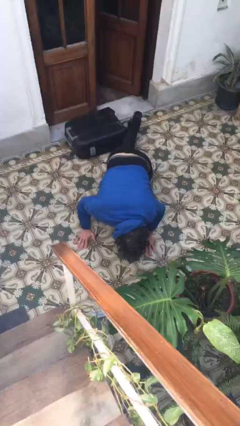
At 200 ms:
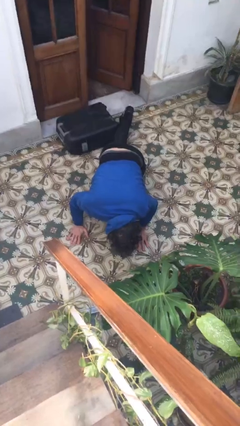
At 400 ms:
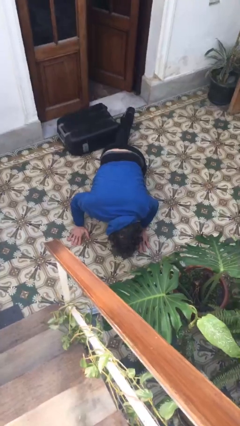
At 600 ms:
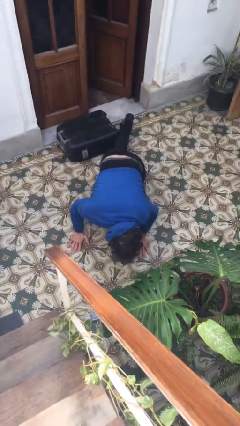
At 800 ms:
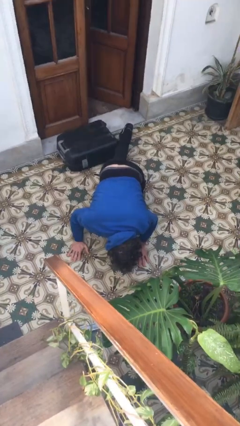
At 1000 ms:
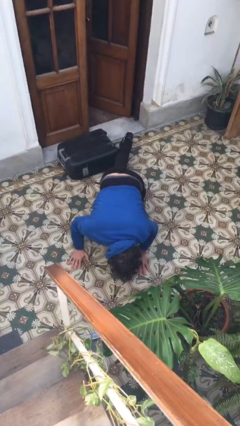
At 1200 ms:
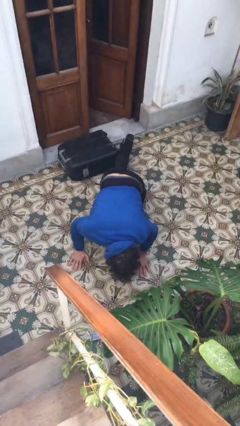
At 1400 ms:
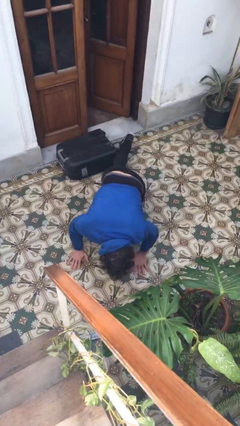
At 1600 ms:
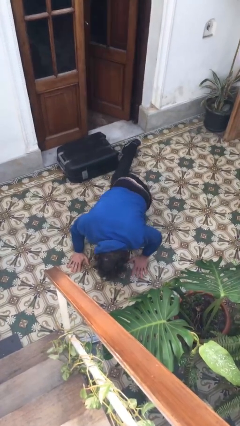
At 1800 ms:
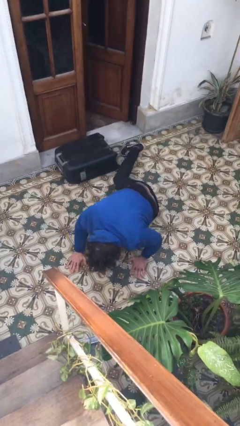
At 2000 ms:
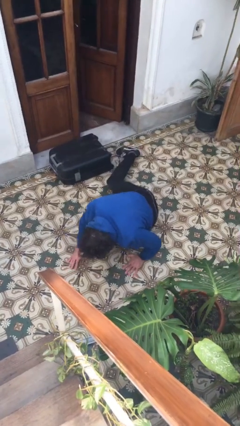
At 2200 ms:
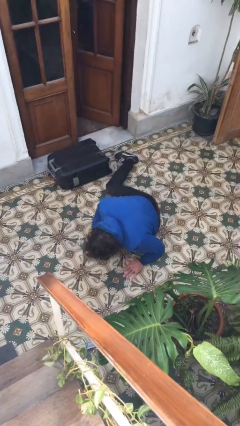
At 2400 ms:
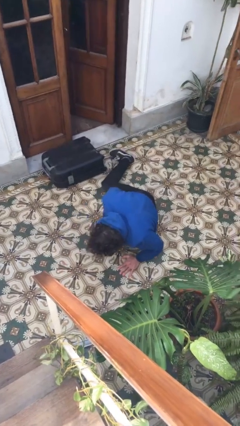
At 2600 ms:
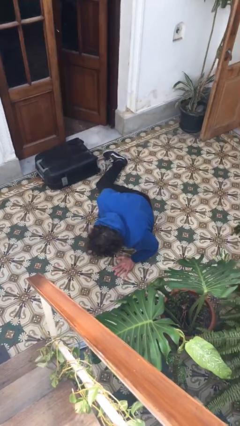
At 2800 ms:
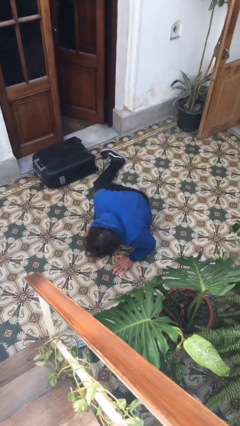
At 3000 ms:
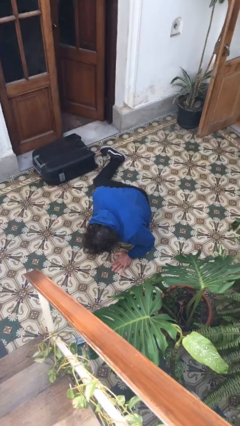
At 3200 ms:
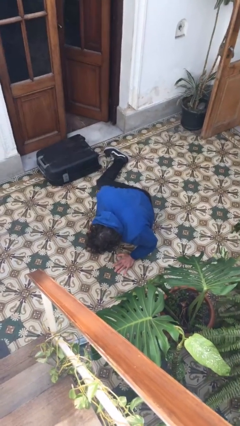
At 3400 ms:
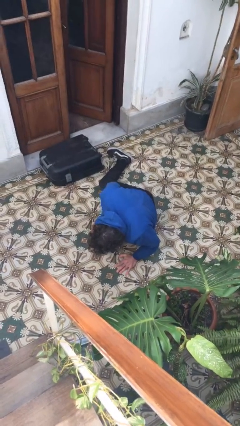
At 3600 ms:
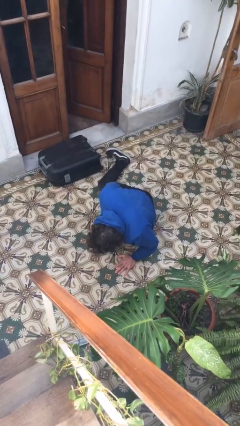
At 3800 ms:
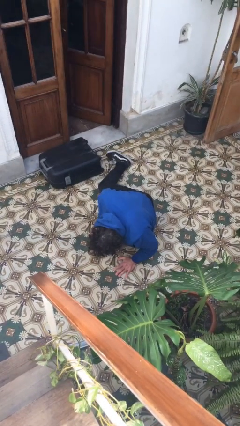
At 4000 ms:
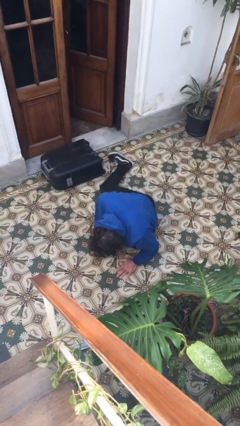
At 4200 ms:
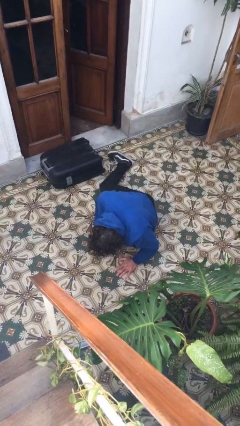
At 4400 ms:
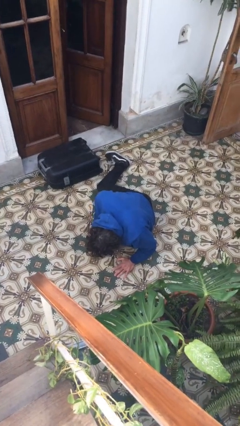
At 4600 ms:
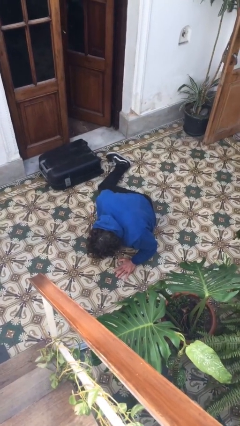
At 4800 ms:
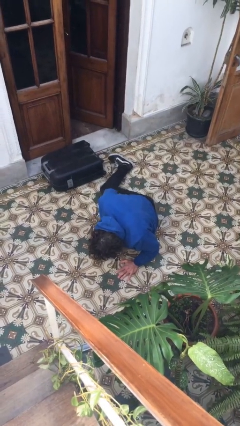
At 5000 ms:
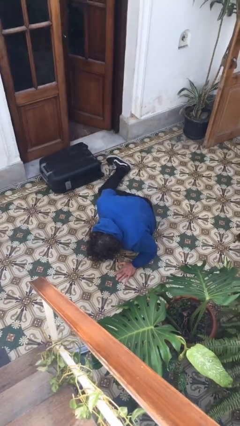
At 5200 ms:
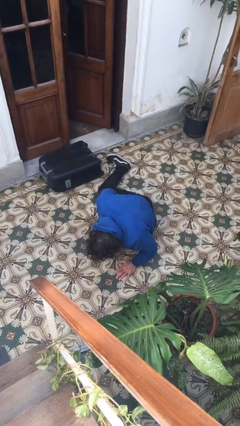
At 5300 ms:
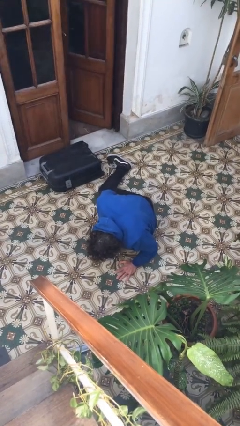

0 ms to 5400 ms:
person lies down on floor

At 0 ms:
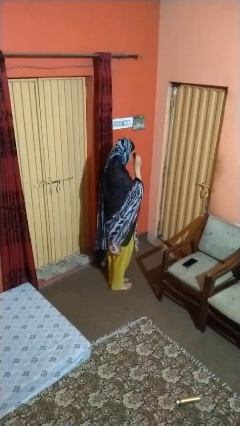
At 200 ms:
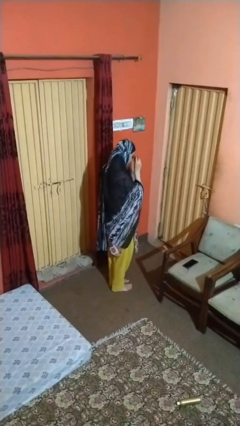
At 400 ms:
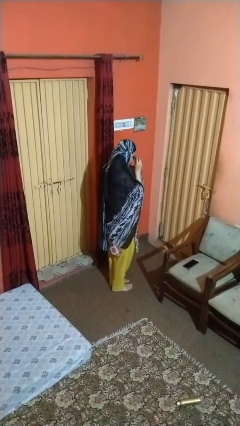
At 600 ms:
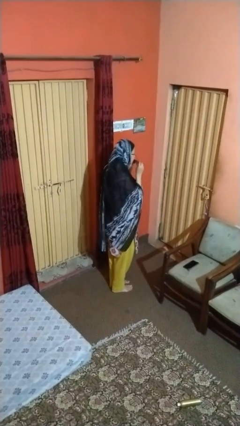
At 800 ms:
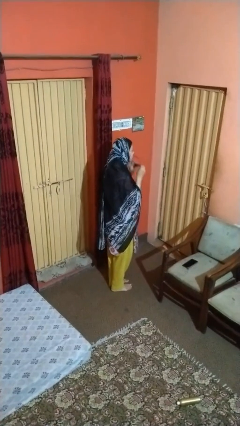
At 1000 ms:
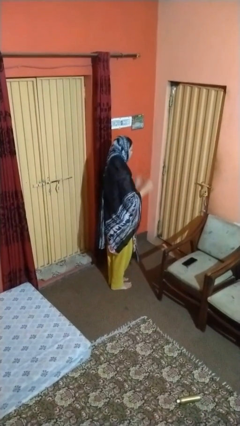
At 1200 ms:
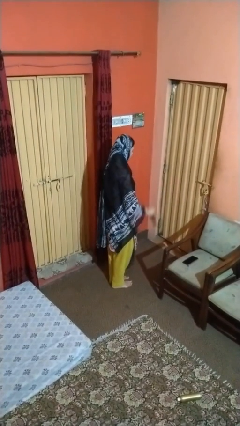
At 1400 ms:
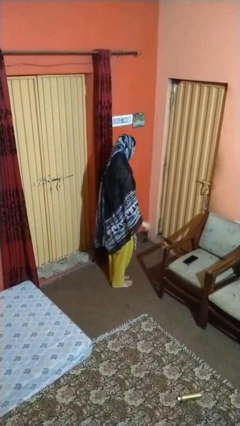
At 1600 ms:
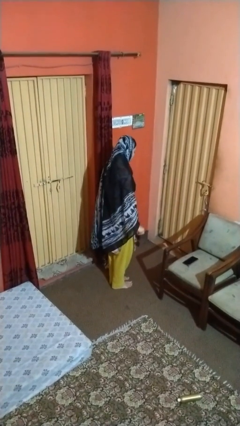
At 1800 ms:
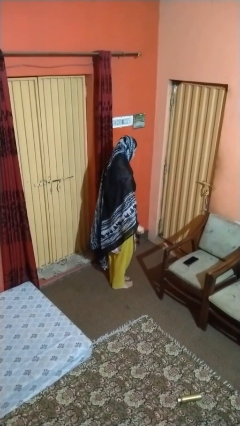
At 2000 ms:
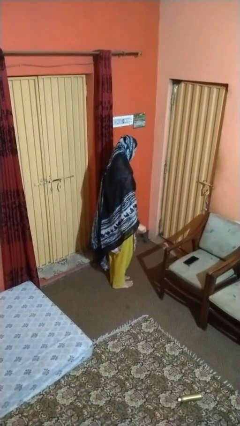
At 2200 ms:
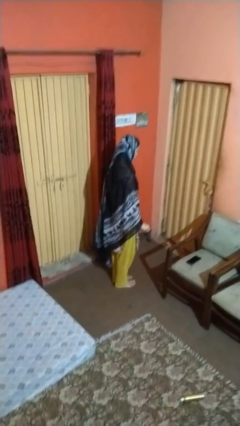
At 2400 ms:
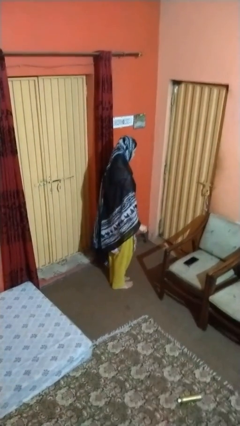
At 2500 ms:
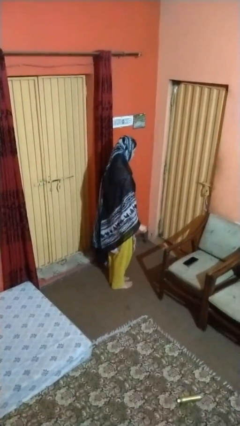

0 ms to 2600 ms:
person takes off sunglasses

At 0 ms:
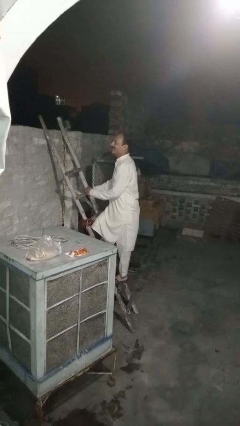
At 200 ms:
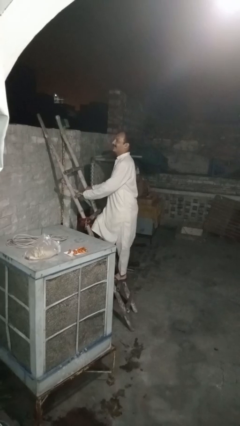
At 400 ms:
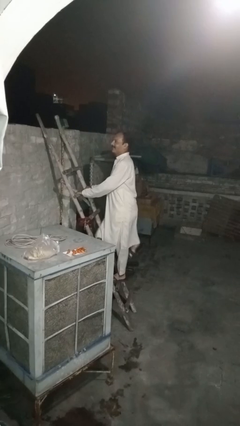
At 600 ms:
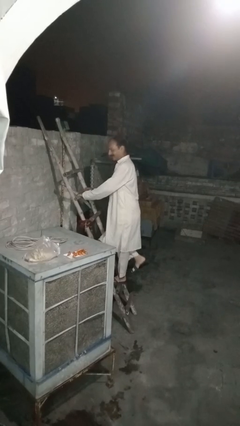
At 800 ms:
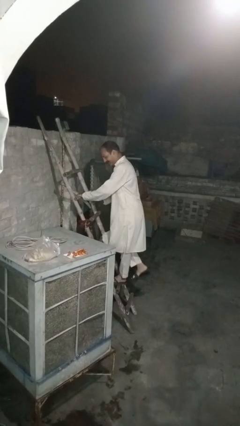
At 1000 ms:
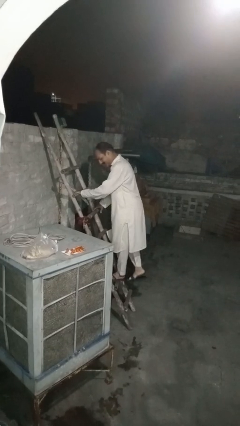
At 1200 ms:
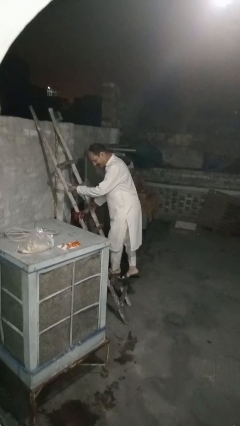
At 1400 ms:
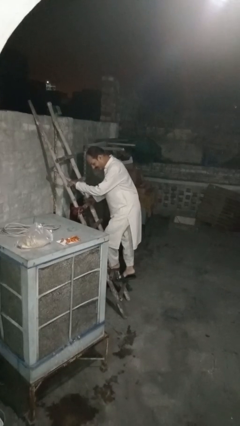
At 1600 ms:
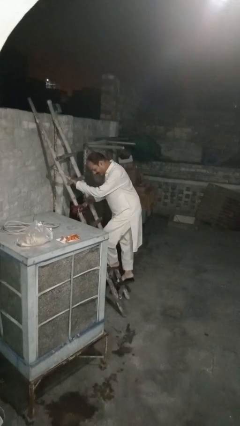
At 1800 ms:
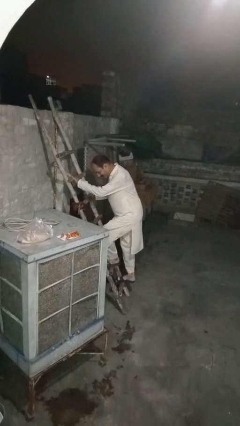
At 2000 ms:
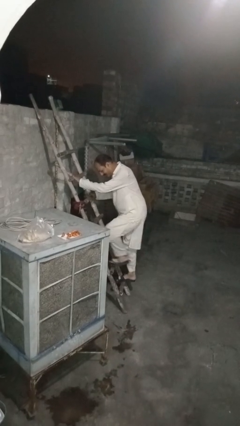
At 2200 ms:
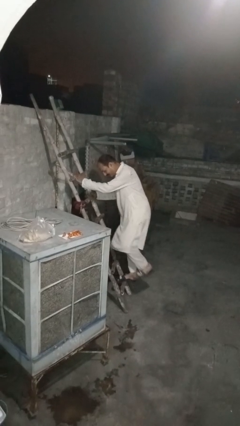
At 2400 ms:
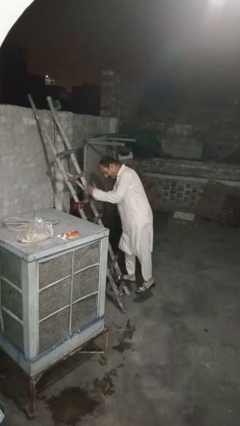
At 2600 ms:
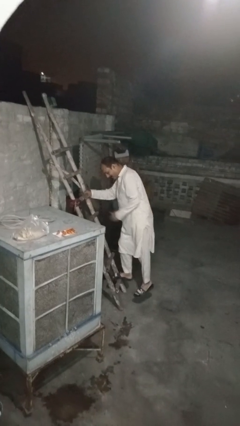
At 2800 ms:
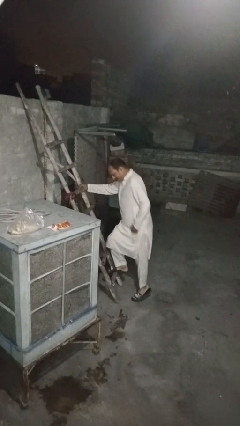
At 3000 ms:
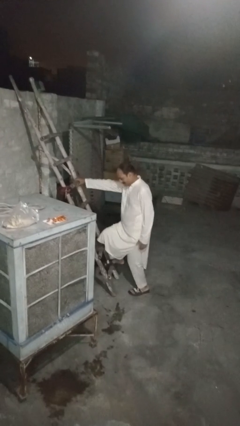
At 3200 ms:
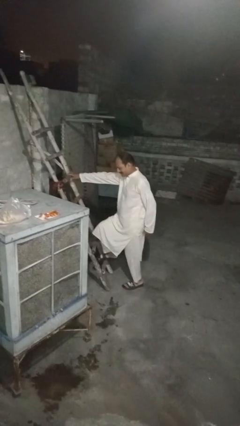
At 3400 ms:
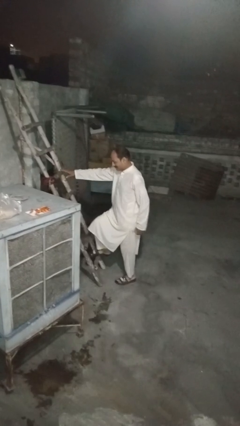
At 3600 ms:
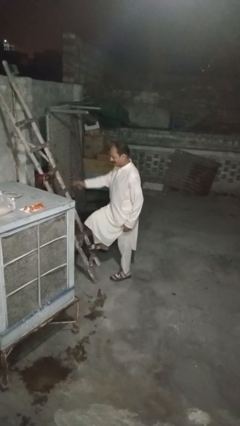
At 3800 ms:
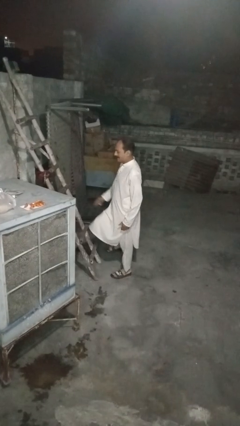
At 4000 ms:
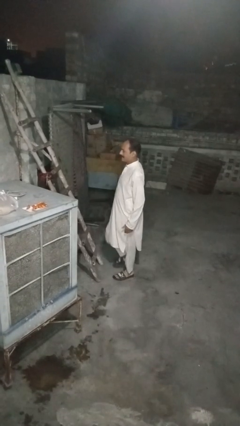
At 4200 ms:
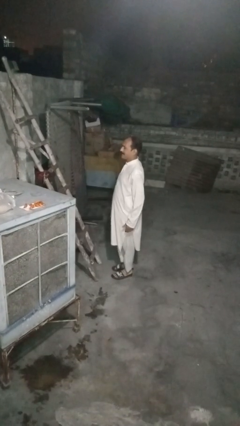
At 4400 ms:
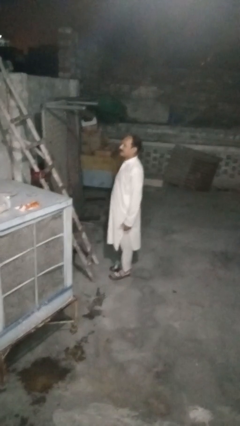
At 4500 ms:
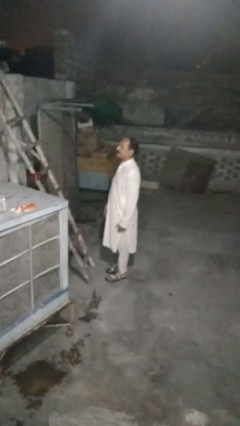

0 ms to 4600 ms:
person climbs down ladder

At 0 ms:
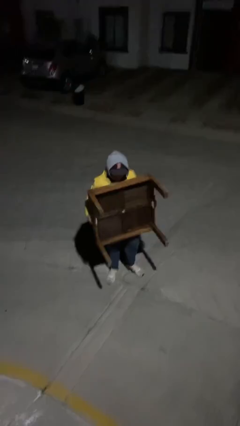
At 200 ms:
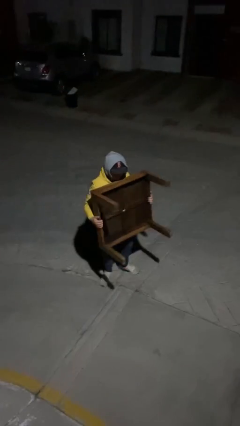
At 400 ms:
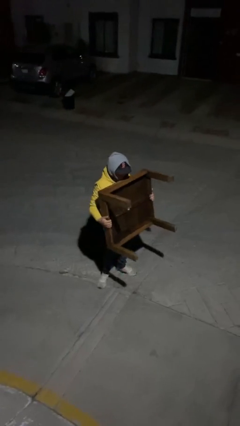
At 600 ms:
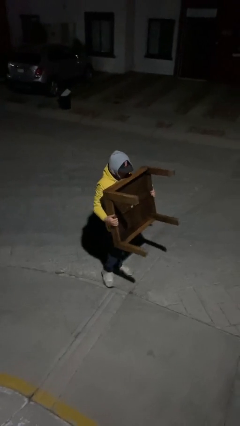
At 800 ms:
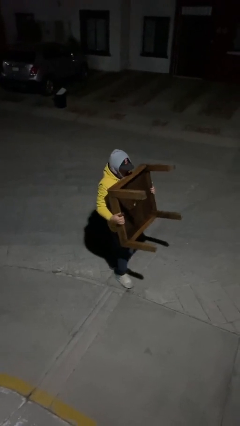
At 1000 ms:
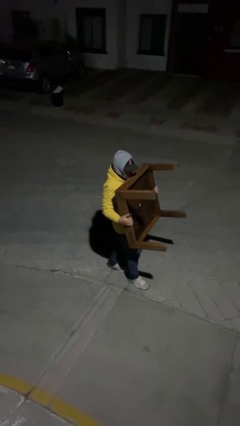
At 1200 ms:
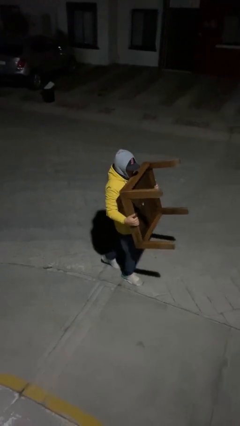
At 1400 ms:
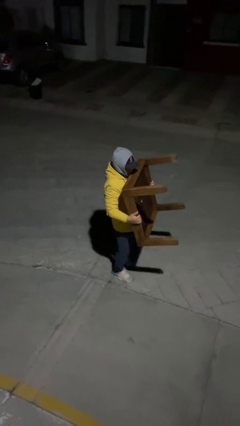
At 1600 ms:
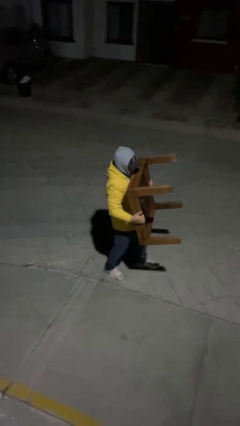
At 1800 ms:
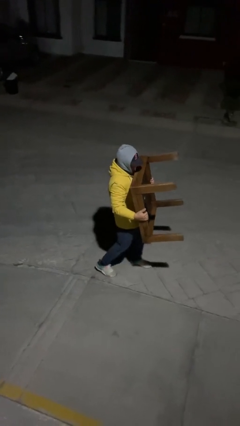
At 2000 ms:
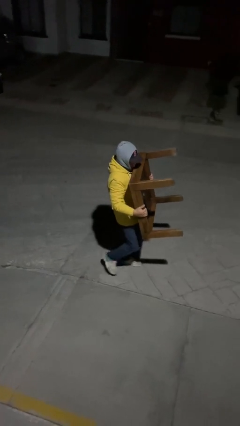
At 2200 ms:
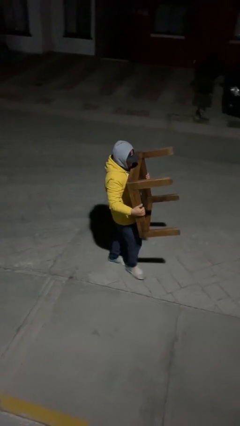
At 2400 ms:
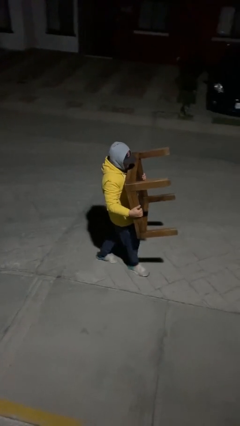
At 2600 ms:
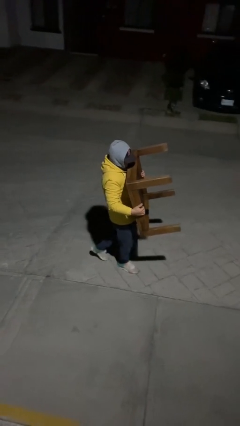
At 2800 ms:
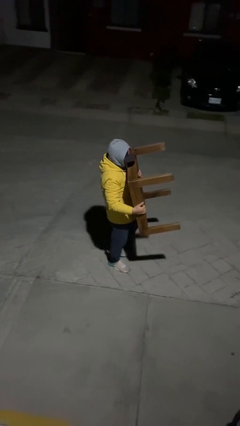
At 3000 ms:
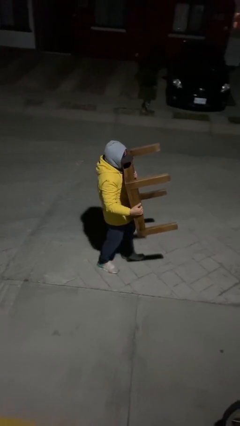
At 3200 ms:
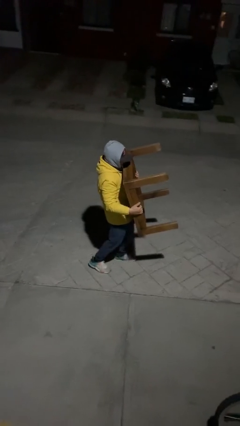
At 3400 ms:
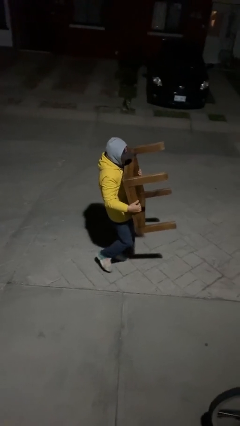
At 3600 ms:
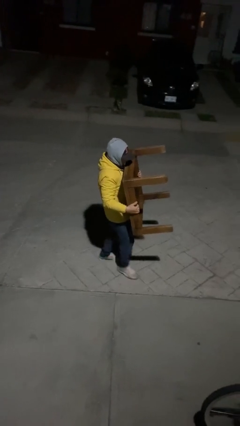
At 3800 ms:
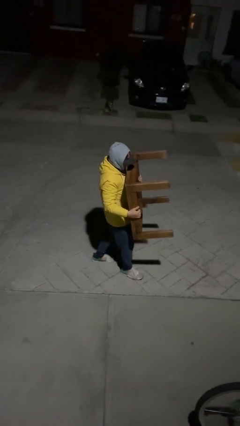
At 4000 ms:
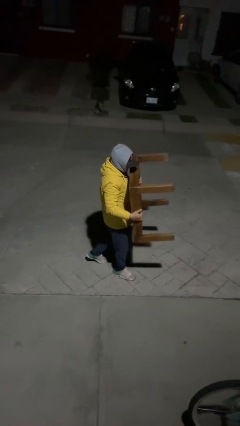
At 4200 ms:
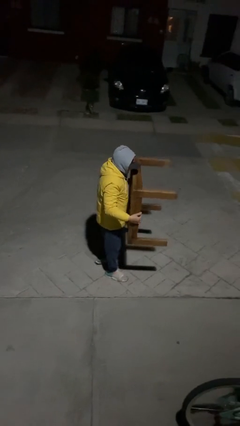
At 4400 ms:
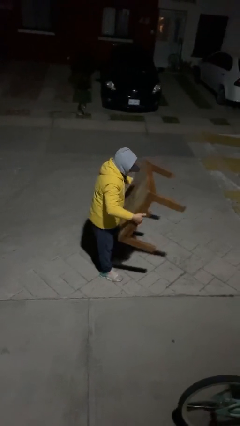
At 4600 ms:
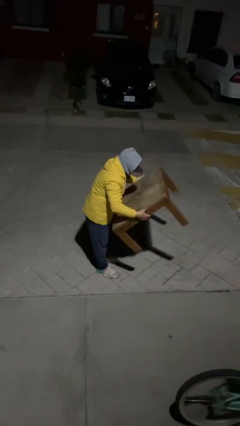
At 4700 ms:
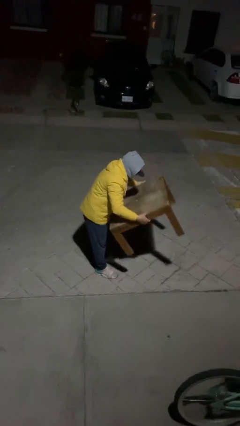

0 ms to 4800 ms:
person carries heavy object
